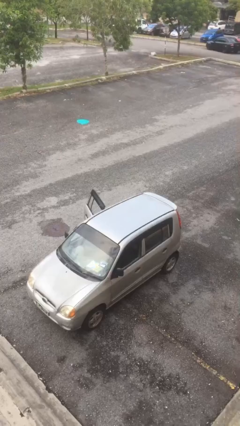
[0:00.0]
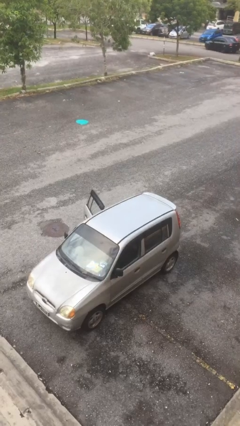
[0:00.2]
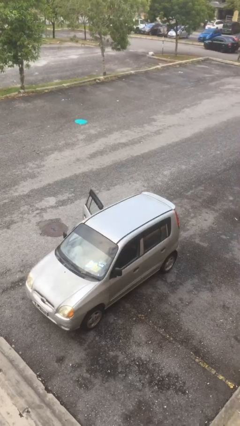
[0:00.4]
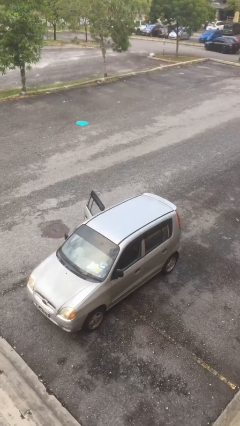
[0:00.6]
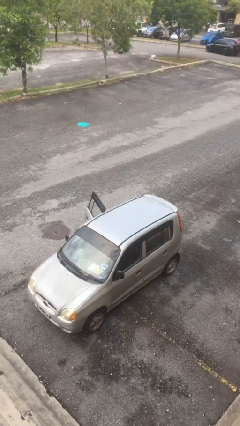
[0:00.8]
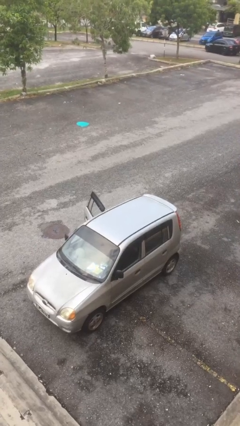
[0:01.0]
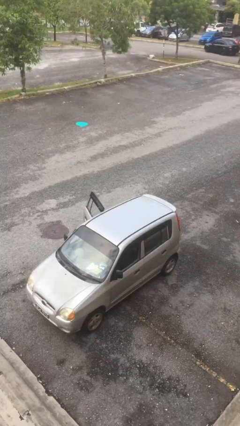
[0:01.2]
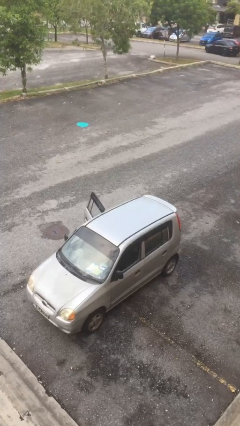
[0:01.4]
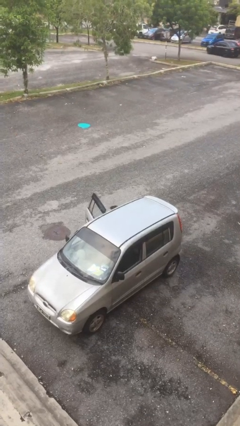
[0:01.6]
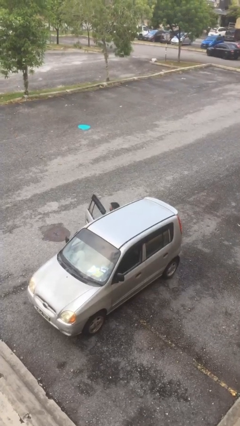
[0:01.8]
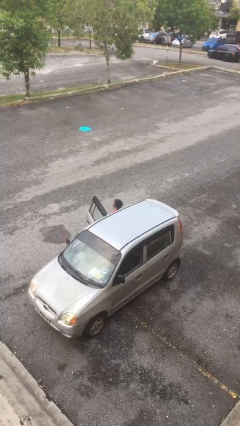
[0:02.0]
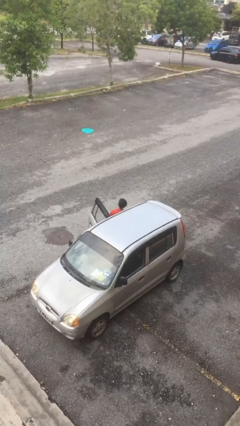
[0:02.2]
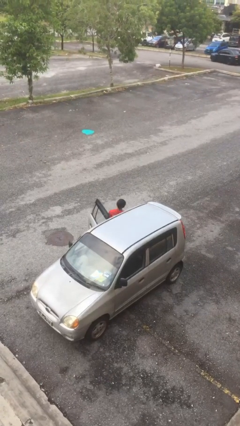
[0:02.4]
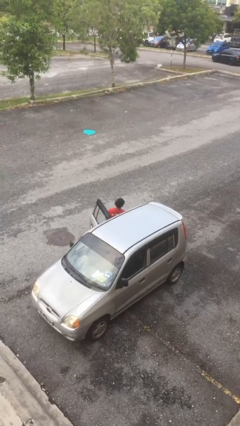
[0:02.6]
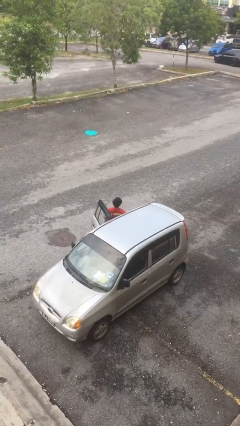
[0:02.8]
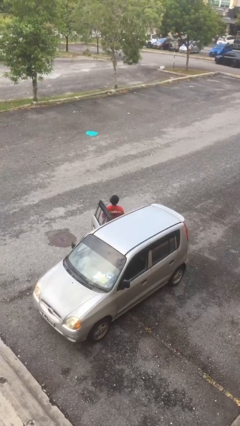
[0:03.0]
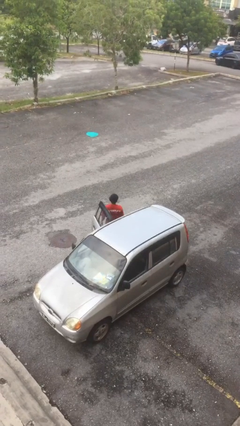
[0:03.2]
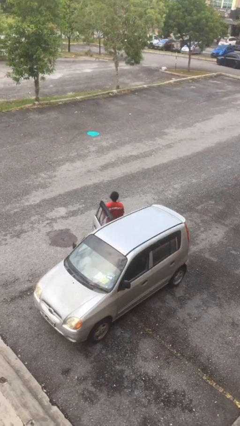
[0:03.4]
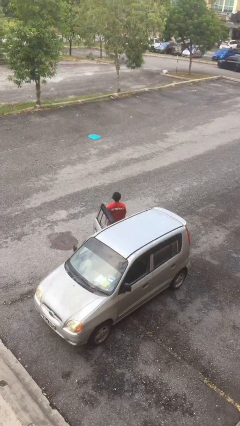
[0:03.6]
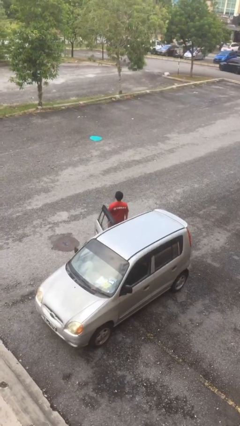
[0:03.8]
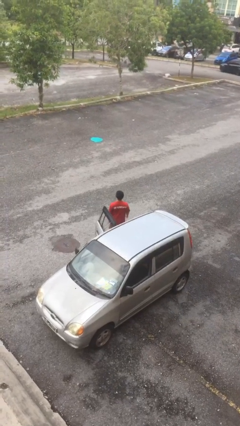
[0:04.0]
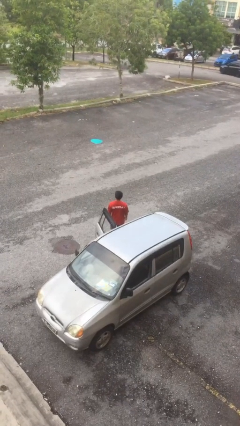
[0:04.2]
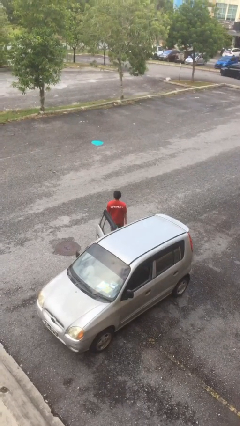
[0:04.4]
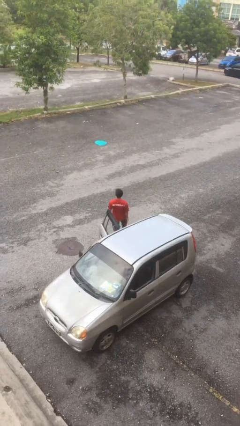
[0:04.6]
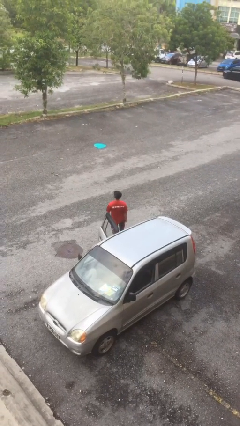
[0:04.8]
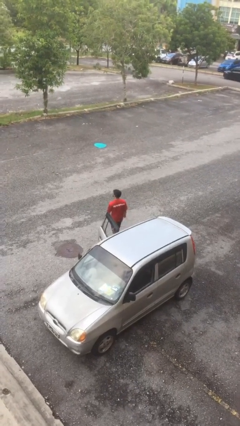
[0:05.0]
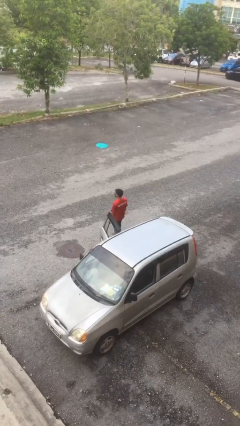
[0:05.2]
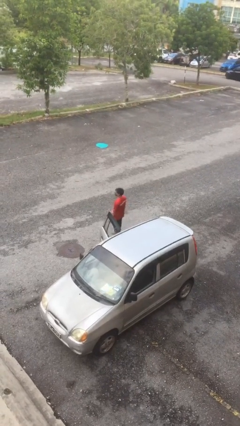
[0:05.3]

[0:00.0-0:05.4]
person exits car

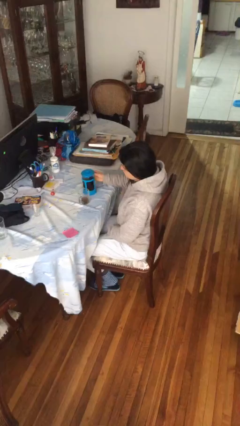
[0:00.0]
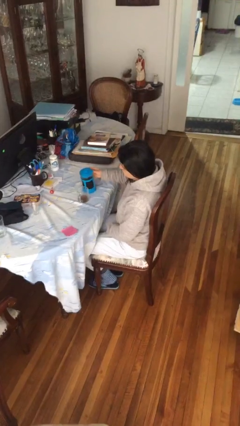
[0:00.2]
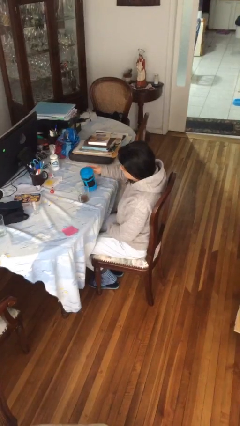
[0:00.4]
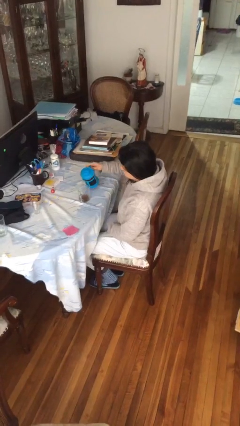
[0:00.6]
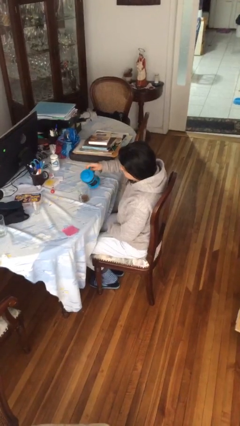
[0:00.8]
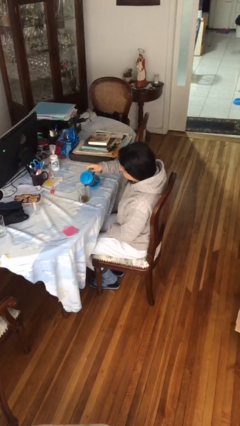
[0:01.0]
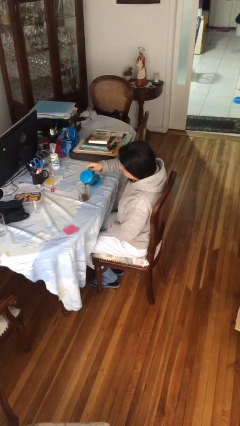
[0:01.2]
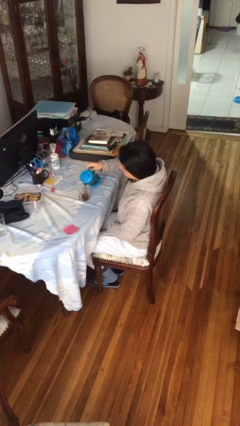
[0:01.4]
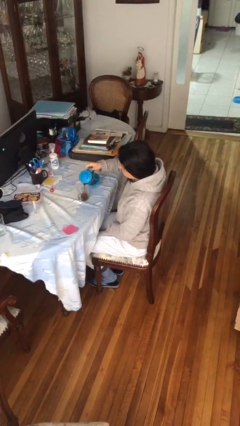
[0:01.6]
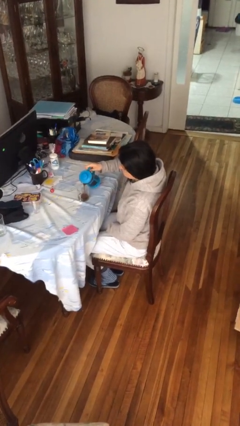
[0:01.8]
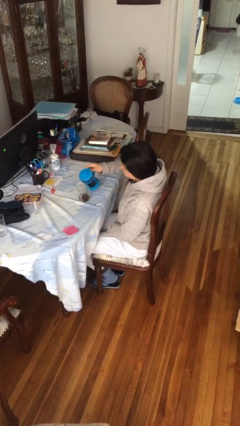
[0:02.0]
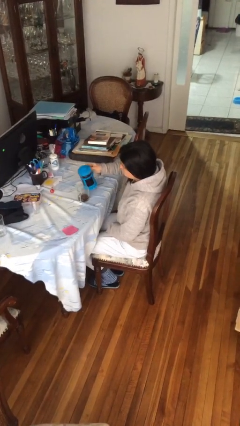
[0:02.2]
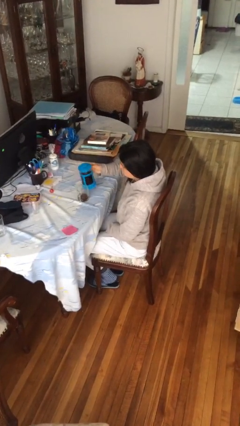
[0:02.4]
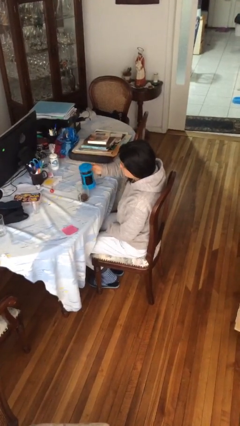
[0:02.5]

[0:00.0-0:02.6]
person pours coffee into mug

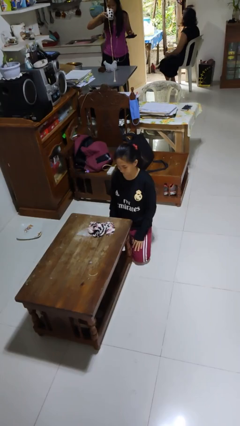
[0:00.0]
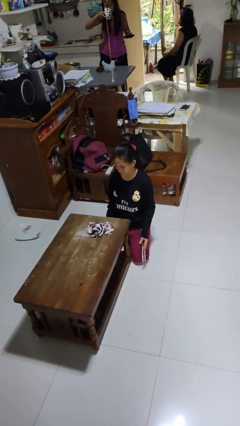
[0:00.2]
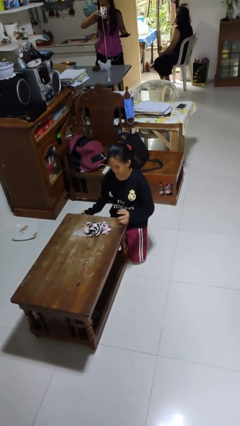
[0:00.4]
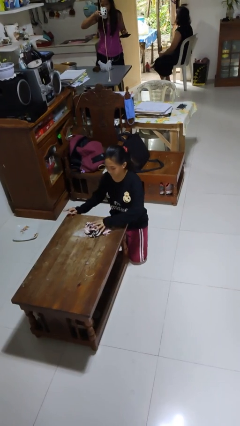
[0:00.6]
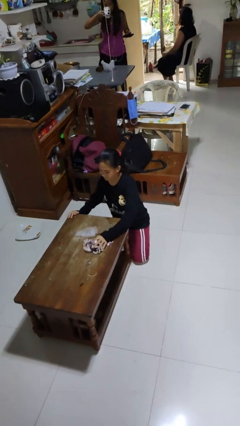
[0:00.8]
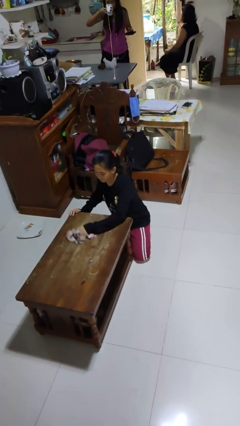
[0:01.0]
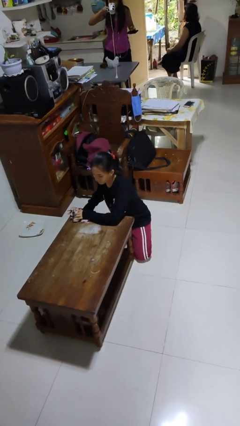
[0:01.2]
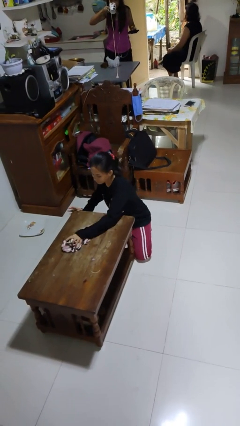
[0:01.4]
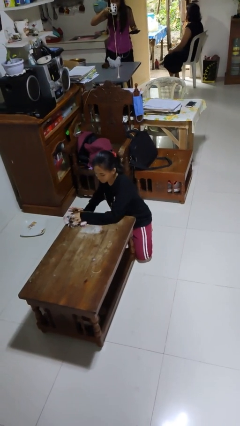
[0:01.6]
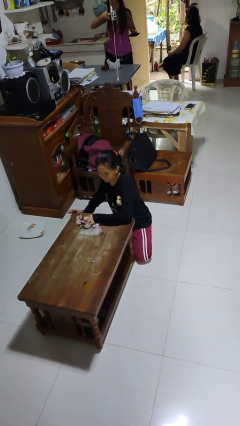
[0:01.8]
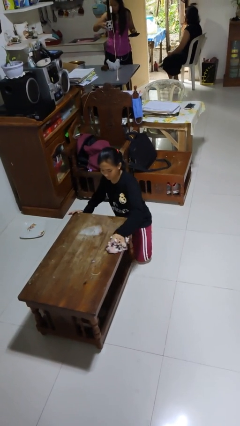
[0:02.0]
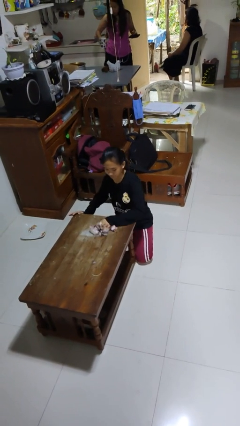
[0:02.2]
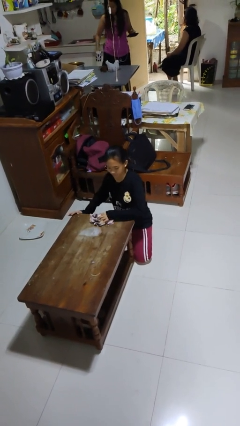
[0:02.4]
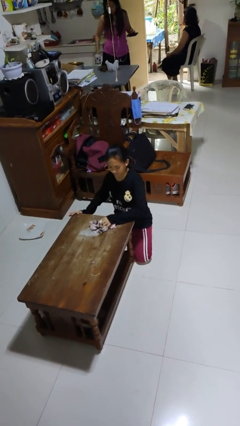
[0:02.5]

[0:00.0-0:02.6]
person cleans table with rag

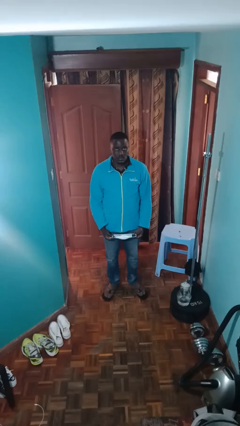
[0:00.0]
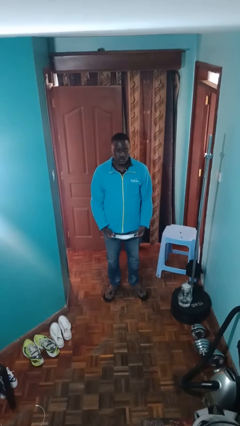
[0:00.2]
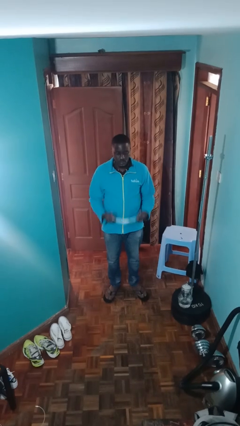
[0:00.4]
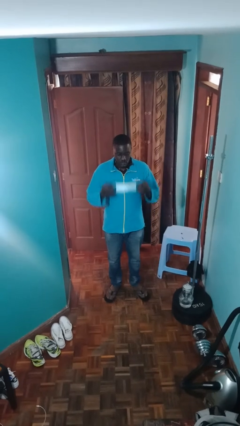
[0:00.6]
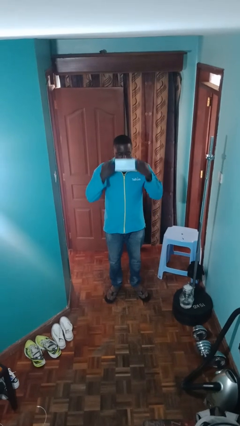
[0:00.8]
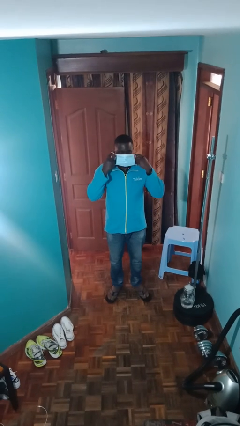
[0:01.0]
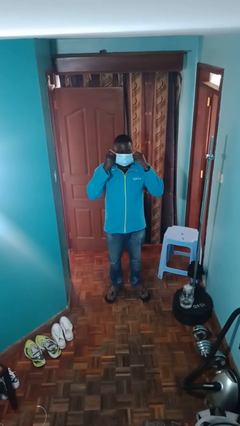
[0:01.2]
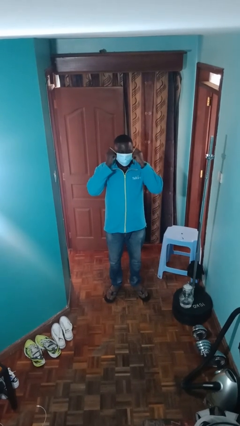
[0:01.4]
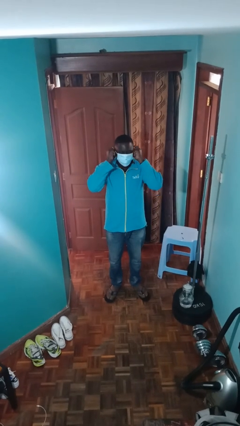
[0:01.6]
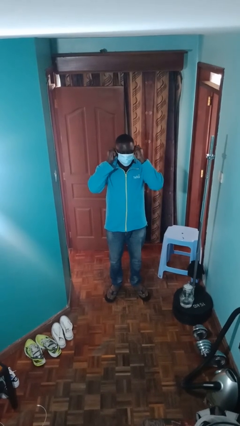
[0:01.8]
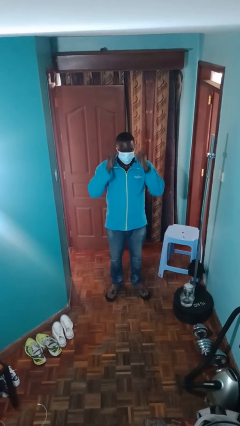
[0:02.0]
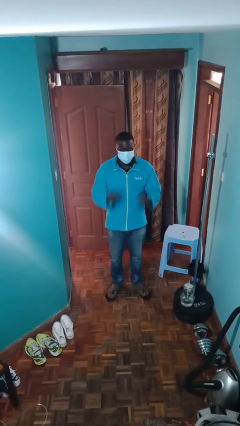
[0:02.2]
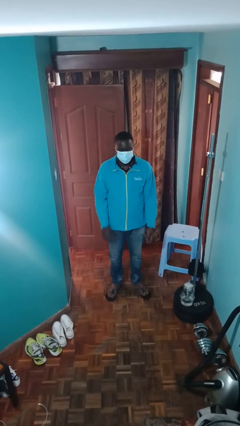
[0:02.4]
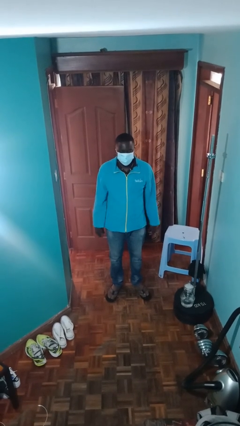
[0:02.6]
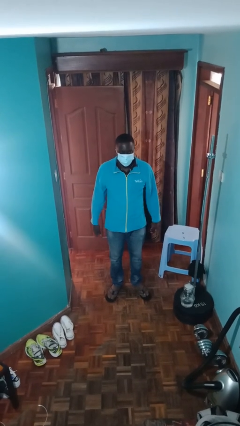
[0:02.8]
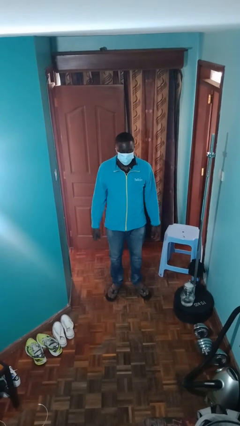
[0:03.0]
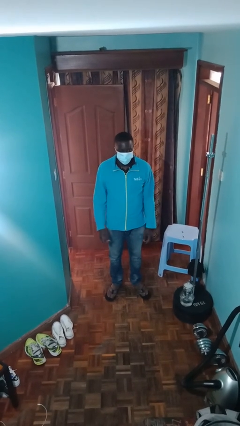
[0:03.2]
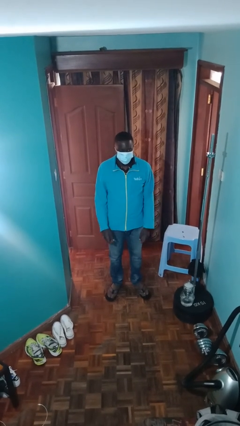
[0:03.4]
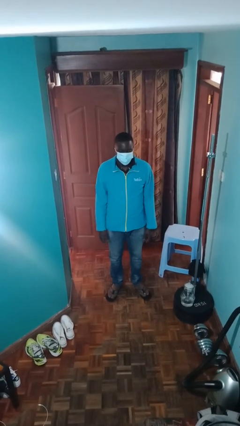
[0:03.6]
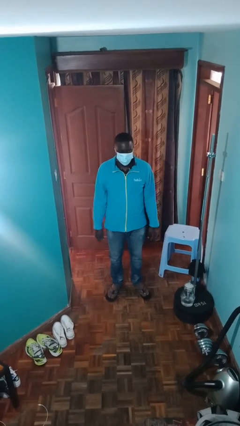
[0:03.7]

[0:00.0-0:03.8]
person puts on facemask

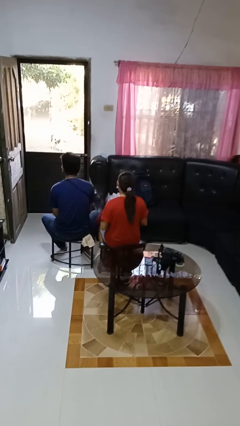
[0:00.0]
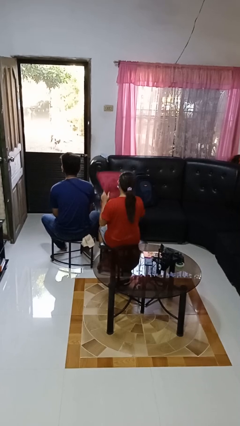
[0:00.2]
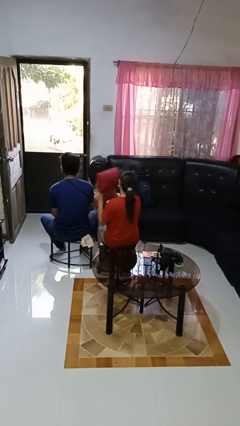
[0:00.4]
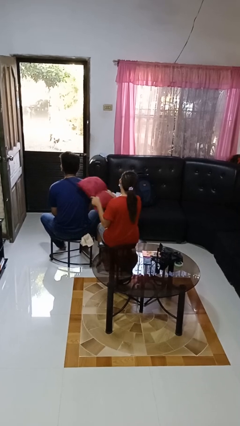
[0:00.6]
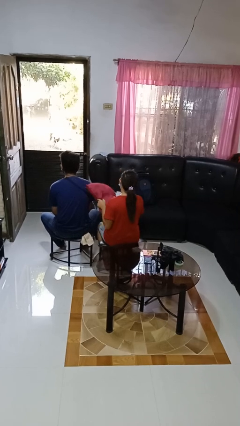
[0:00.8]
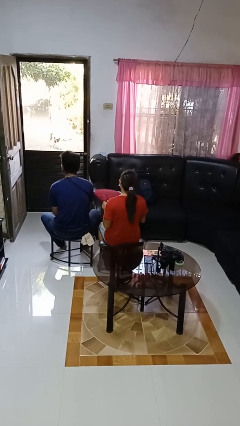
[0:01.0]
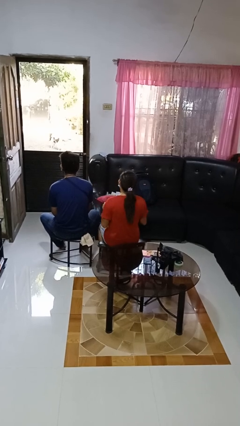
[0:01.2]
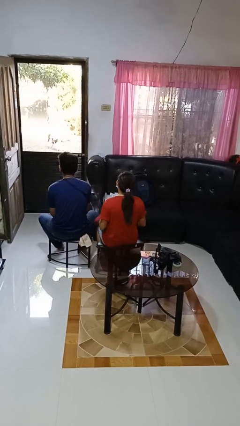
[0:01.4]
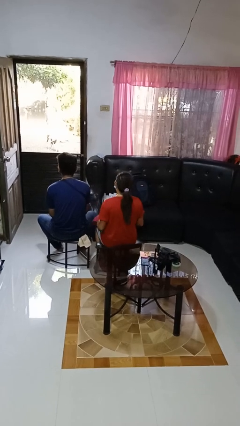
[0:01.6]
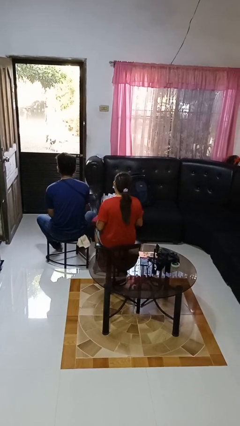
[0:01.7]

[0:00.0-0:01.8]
person hits person with pillow

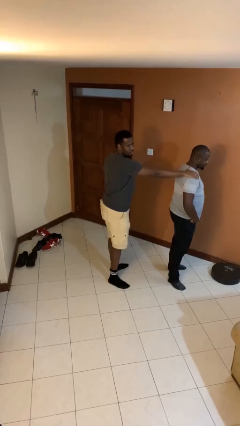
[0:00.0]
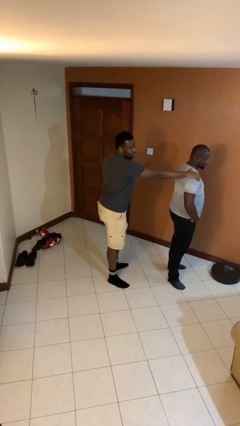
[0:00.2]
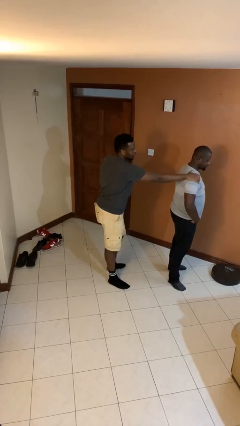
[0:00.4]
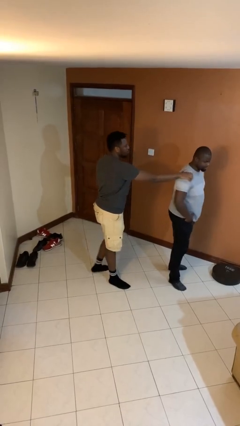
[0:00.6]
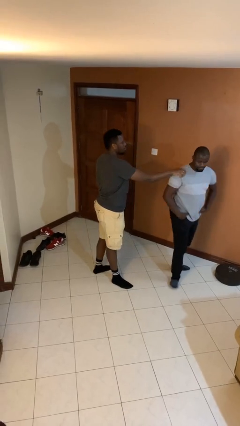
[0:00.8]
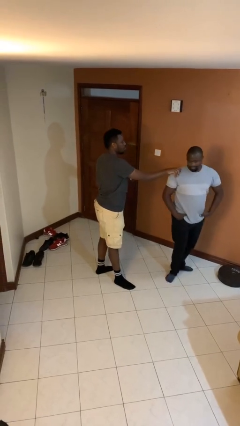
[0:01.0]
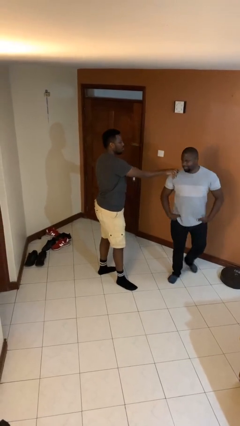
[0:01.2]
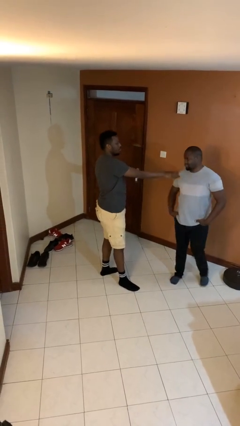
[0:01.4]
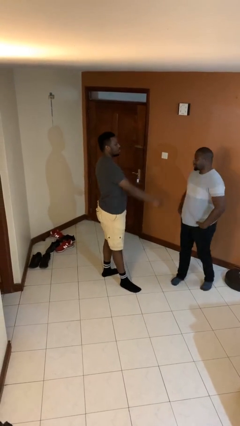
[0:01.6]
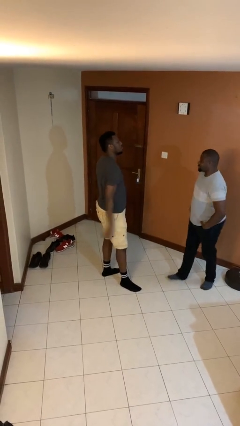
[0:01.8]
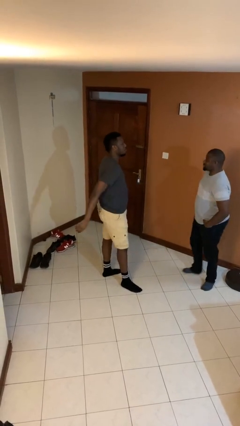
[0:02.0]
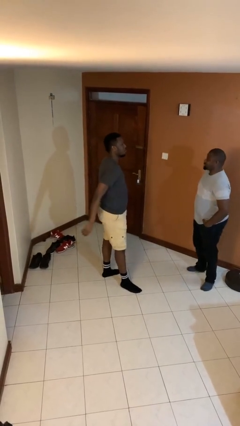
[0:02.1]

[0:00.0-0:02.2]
person spins person around
